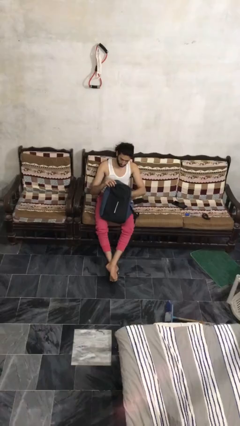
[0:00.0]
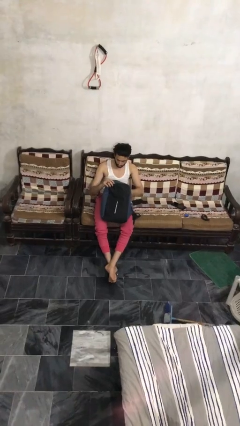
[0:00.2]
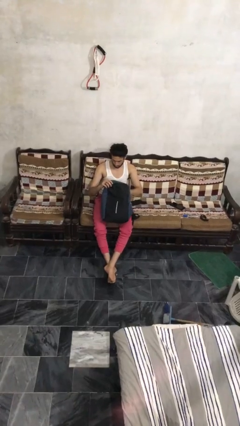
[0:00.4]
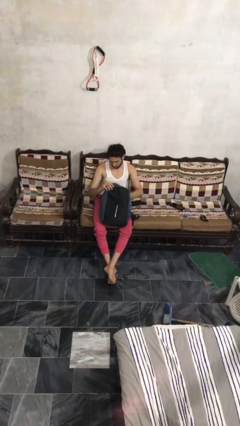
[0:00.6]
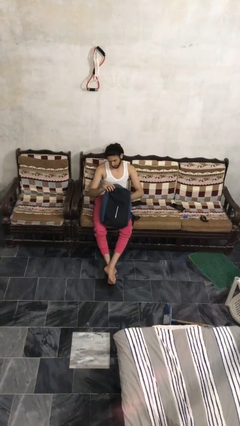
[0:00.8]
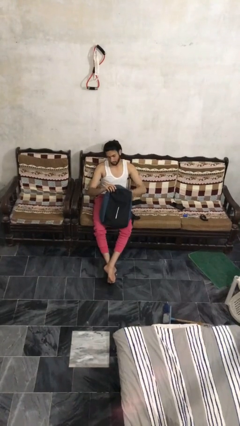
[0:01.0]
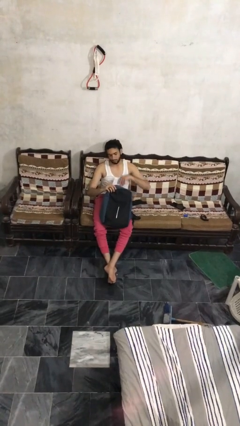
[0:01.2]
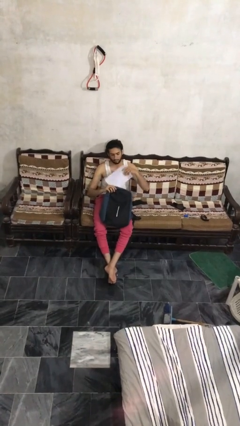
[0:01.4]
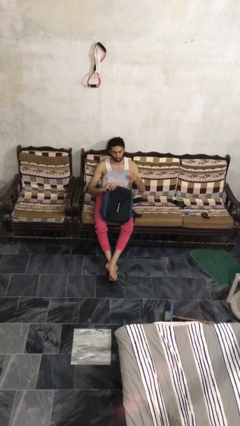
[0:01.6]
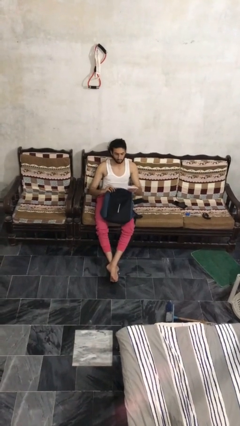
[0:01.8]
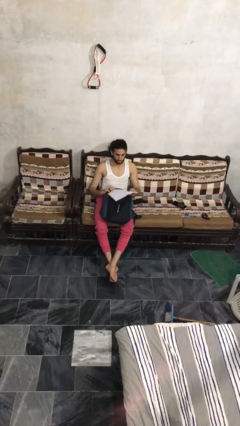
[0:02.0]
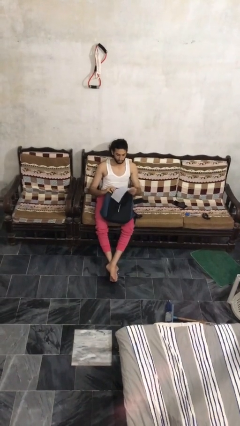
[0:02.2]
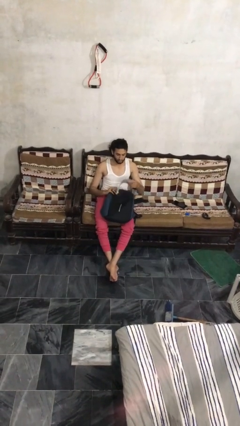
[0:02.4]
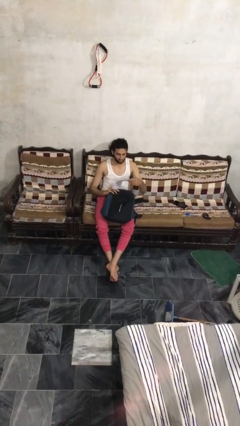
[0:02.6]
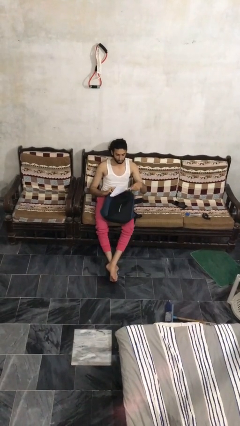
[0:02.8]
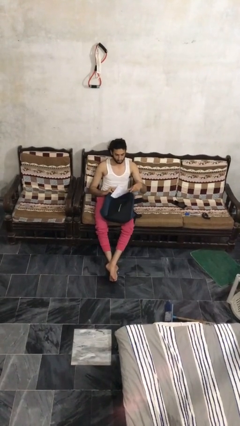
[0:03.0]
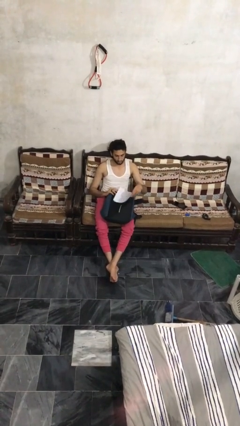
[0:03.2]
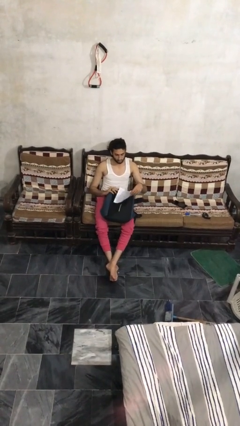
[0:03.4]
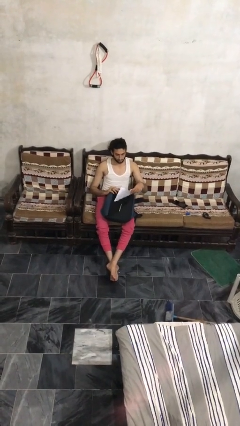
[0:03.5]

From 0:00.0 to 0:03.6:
person takes object from backpack

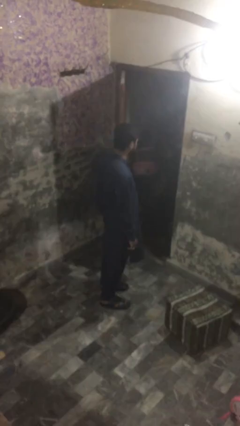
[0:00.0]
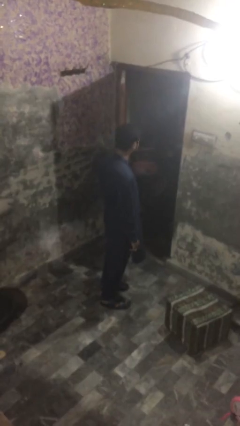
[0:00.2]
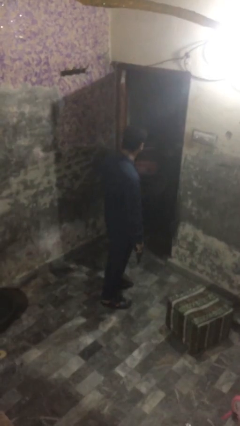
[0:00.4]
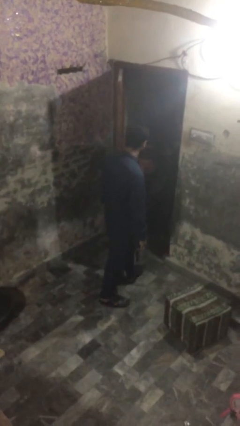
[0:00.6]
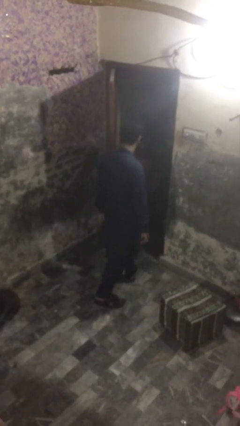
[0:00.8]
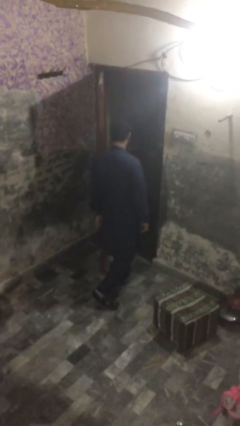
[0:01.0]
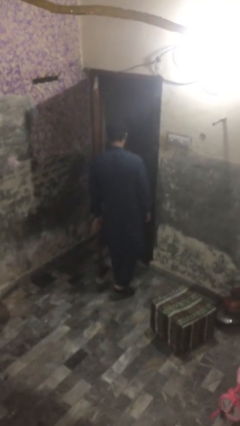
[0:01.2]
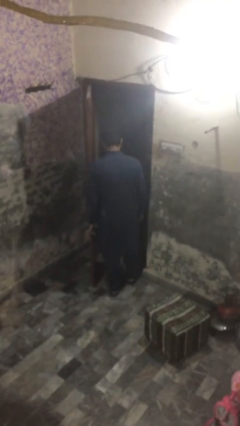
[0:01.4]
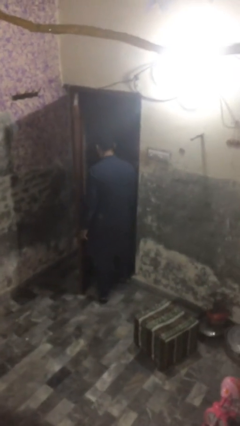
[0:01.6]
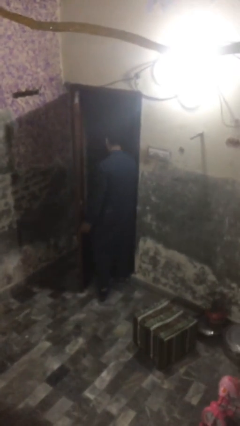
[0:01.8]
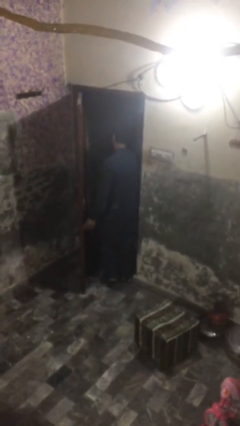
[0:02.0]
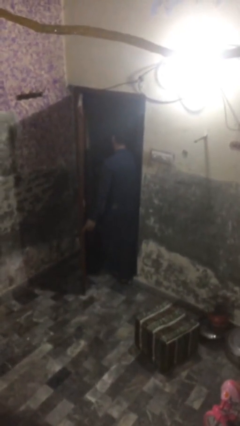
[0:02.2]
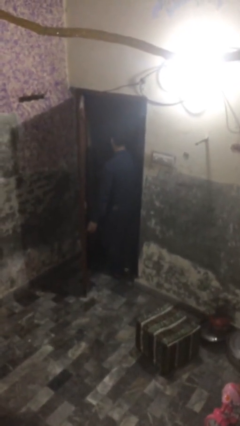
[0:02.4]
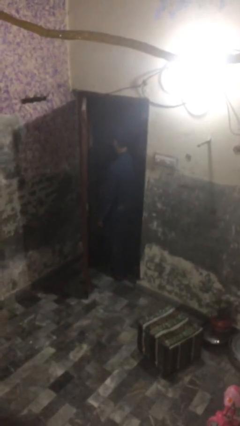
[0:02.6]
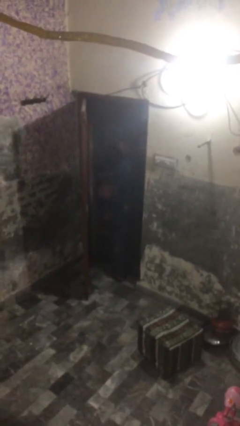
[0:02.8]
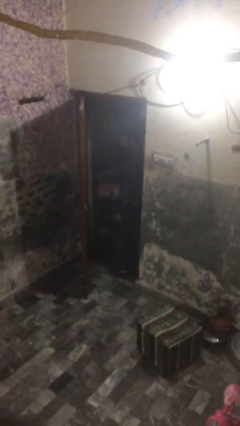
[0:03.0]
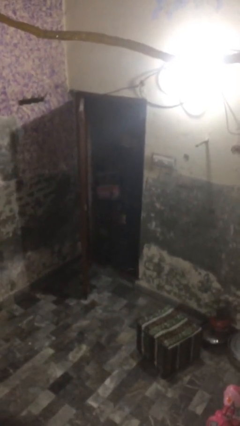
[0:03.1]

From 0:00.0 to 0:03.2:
person exits scene through structure

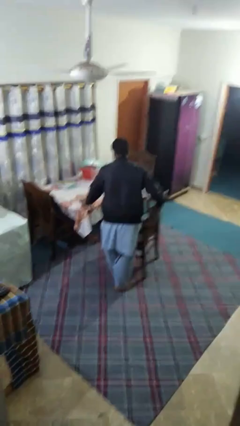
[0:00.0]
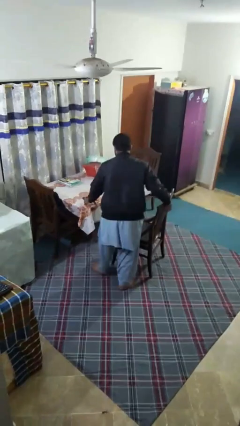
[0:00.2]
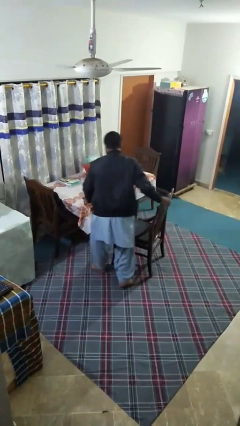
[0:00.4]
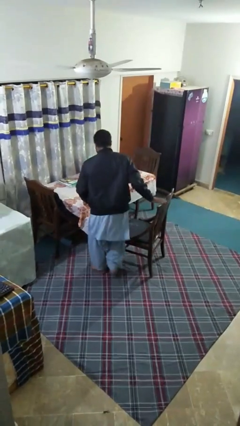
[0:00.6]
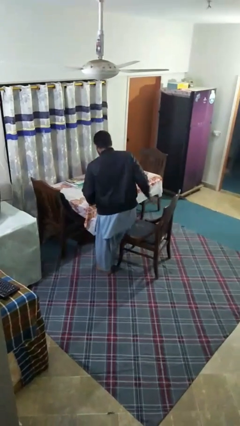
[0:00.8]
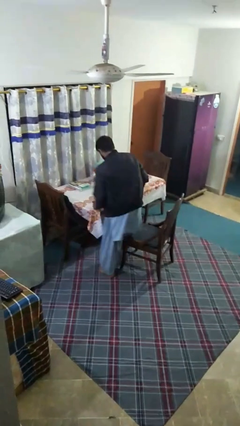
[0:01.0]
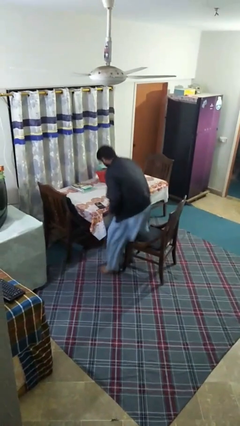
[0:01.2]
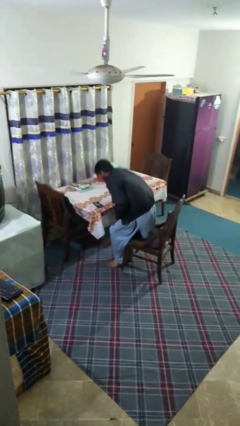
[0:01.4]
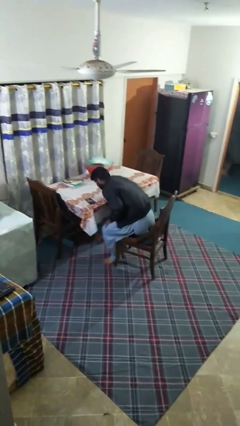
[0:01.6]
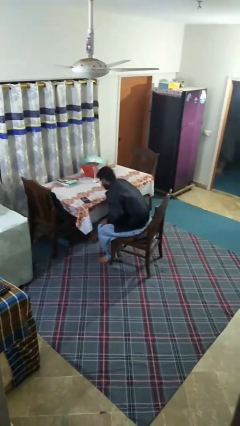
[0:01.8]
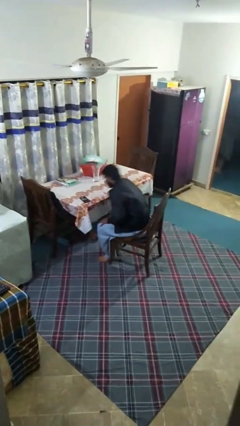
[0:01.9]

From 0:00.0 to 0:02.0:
person sits down

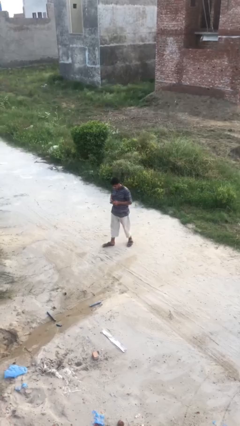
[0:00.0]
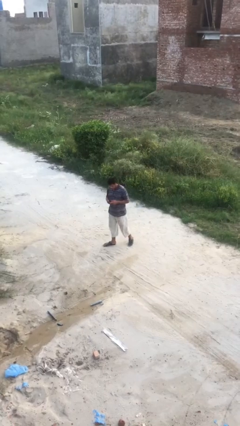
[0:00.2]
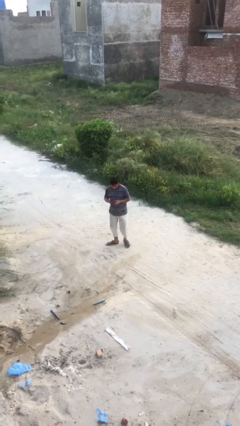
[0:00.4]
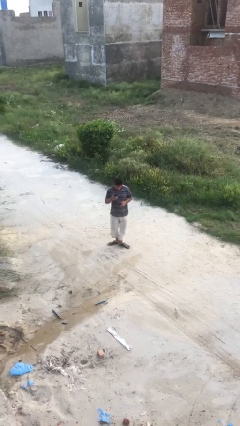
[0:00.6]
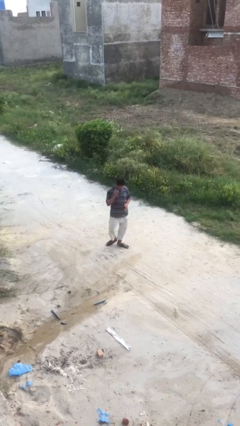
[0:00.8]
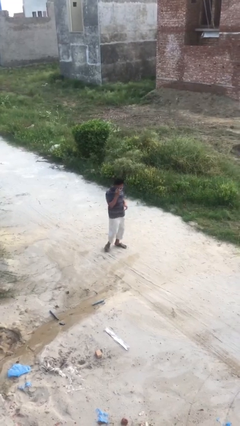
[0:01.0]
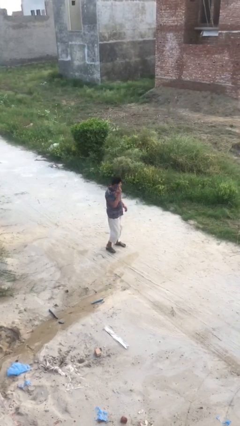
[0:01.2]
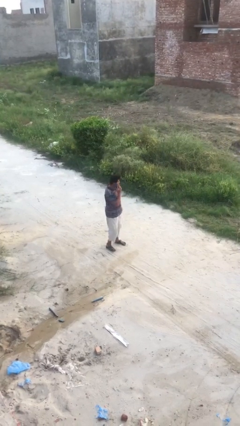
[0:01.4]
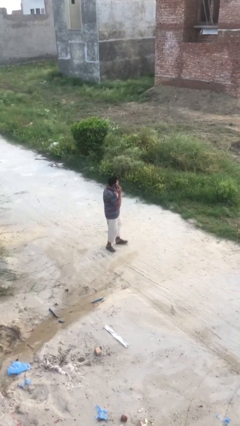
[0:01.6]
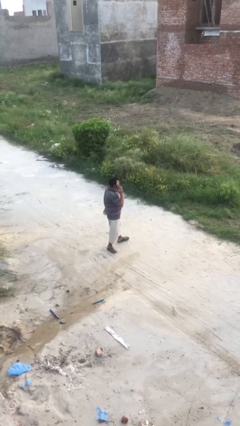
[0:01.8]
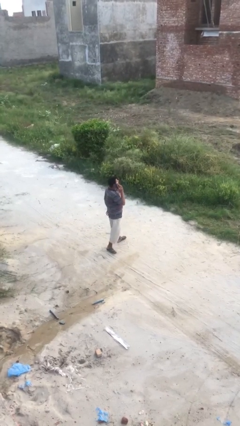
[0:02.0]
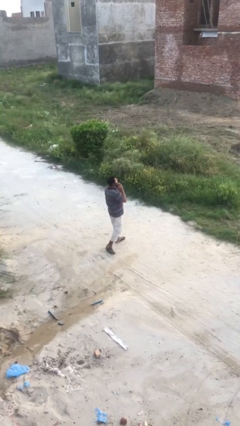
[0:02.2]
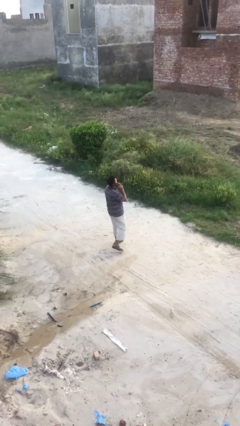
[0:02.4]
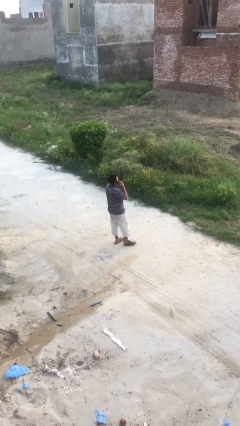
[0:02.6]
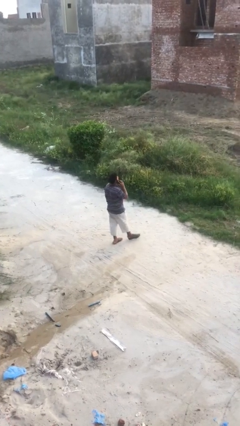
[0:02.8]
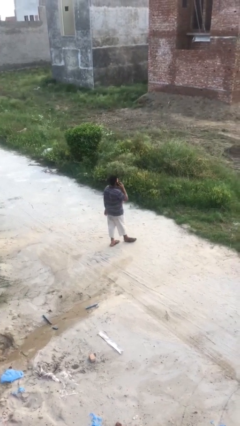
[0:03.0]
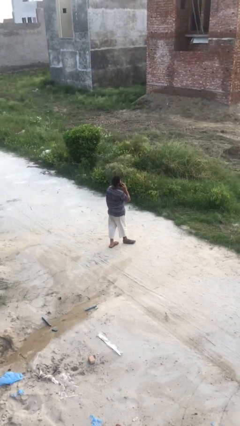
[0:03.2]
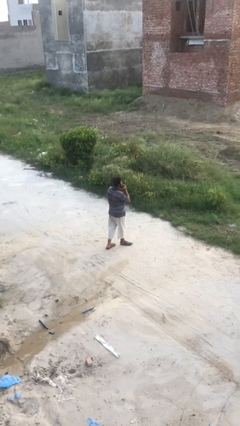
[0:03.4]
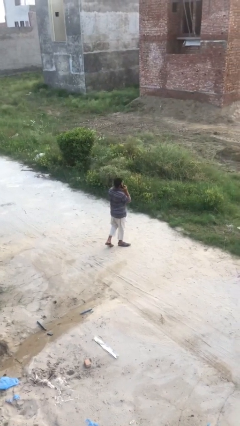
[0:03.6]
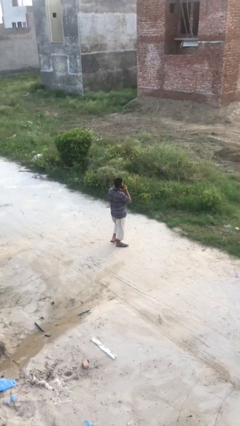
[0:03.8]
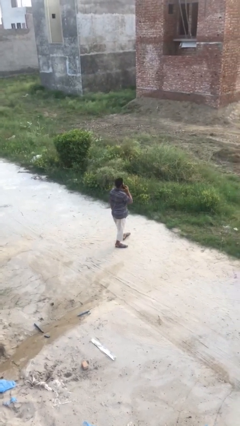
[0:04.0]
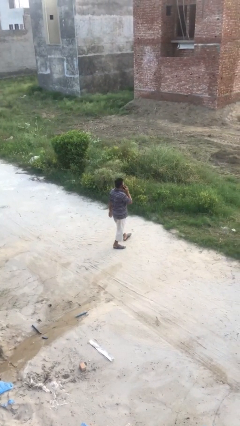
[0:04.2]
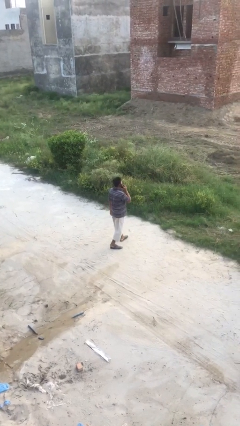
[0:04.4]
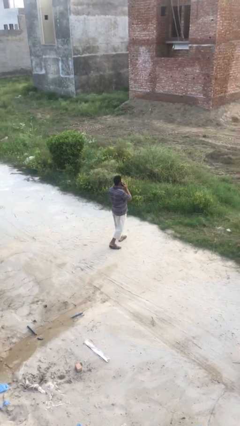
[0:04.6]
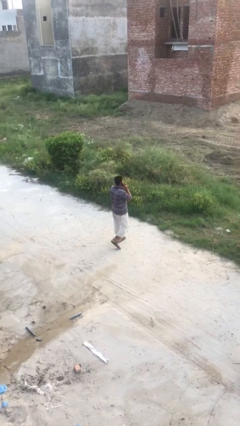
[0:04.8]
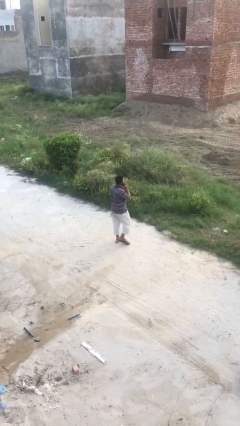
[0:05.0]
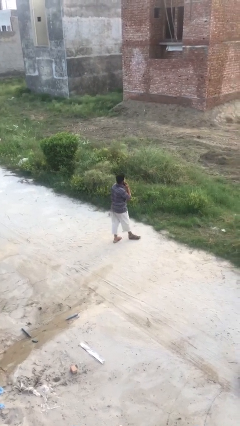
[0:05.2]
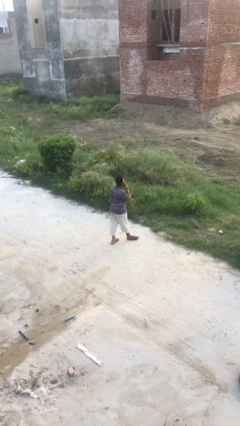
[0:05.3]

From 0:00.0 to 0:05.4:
person talks on phone

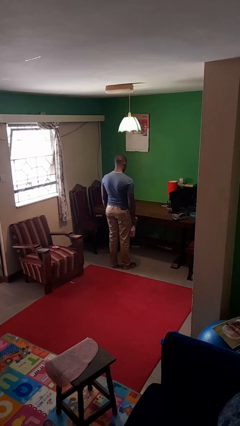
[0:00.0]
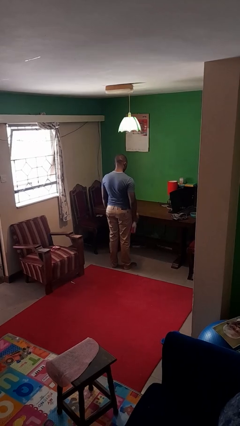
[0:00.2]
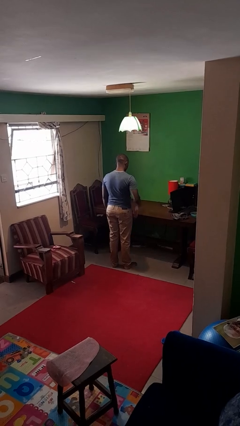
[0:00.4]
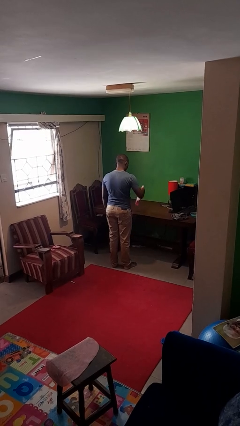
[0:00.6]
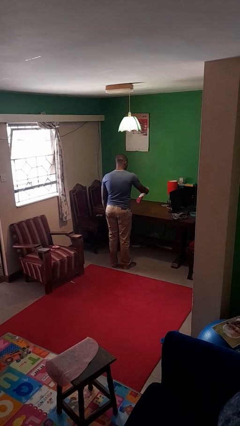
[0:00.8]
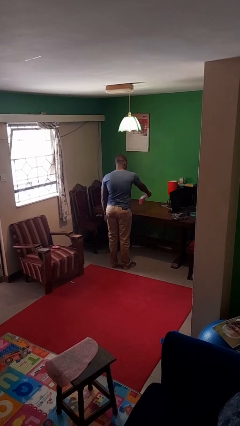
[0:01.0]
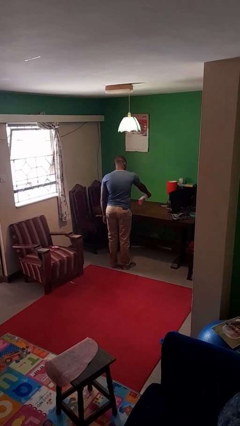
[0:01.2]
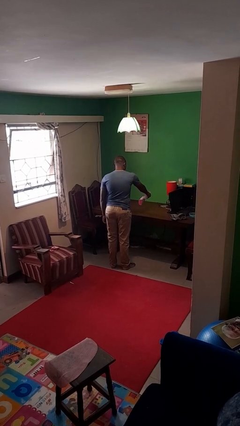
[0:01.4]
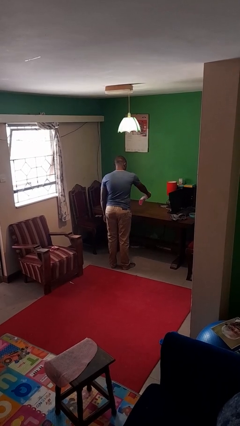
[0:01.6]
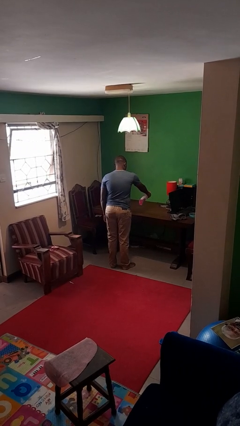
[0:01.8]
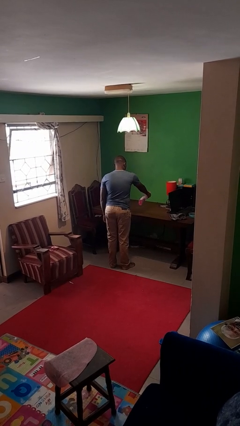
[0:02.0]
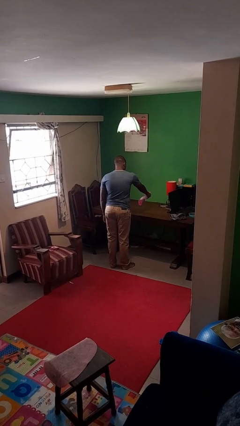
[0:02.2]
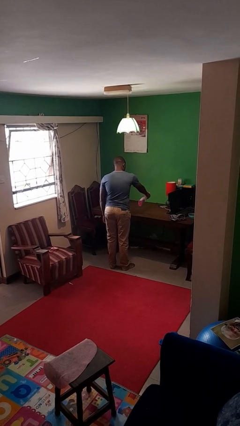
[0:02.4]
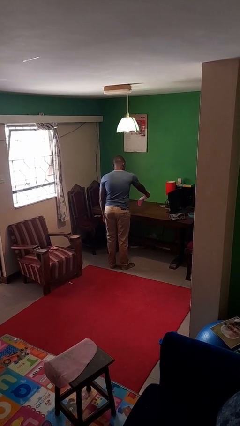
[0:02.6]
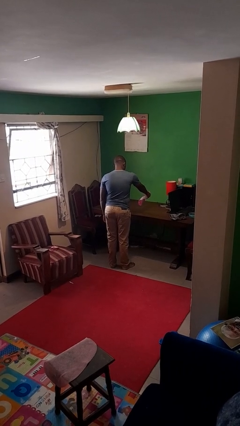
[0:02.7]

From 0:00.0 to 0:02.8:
person sprays from bottle

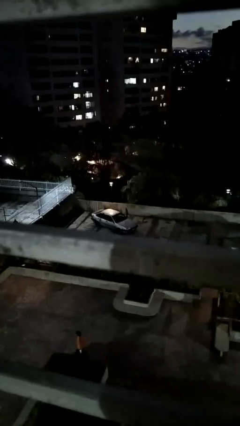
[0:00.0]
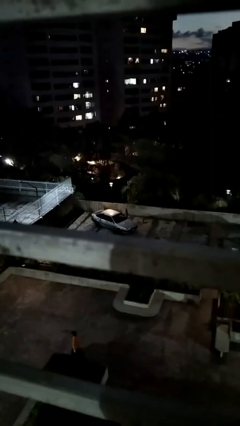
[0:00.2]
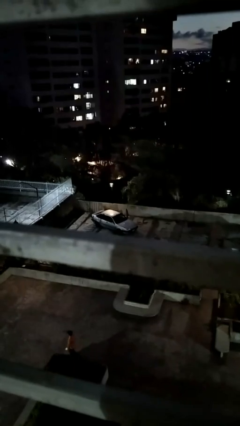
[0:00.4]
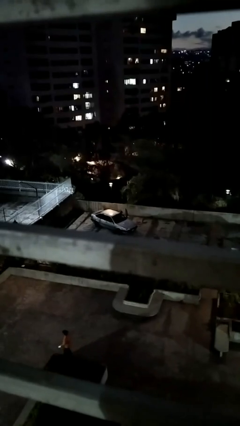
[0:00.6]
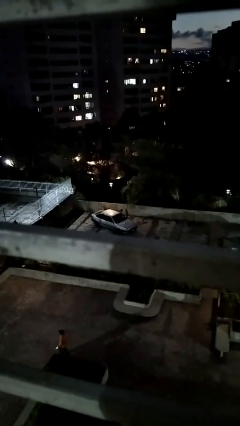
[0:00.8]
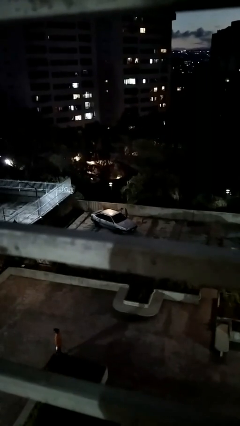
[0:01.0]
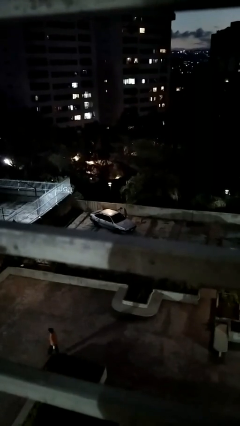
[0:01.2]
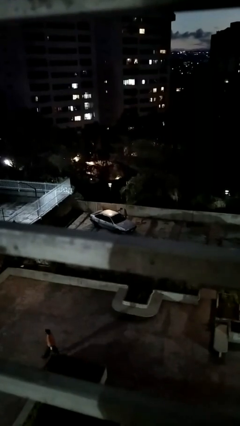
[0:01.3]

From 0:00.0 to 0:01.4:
person exits car
